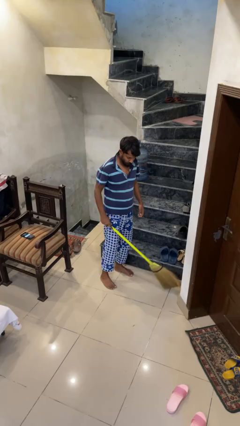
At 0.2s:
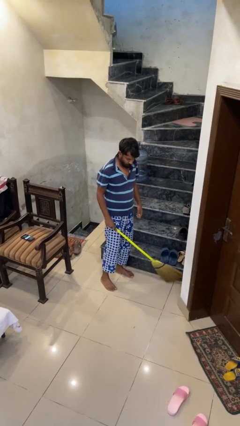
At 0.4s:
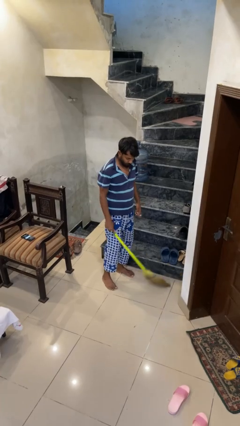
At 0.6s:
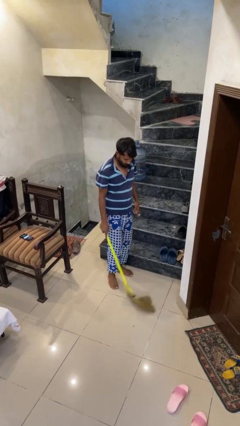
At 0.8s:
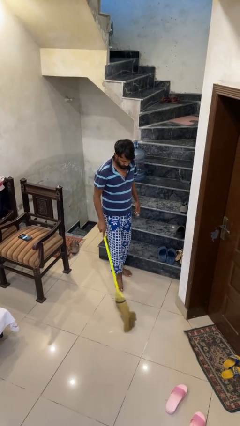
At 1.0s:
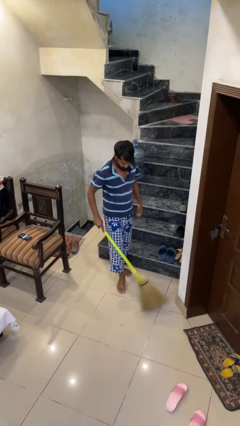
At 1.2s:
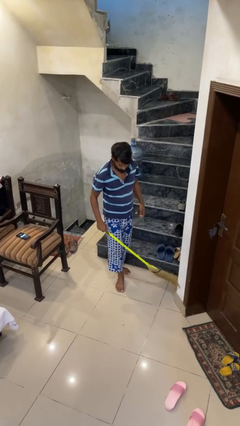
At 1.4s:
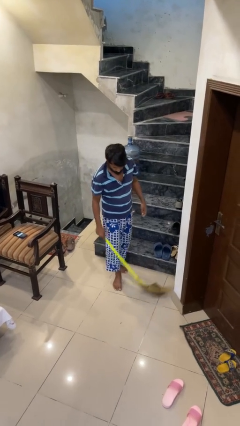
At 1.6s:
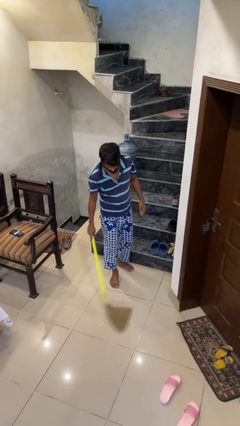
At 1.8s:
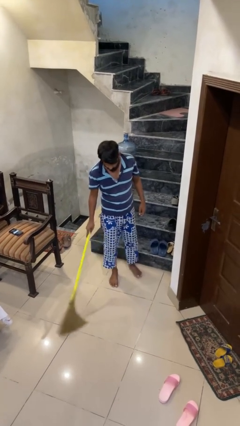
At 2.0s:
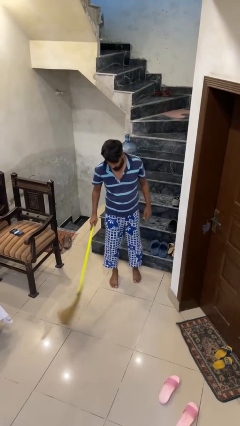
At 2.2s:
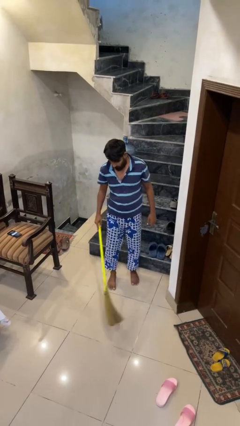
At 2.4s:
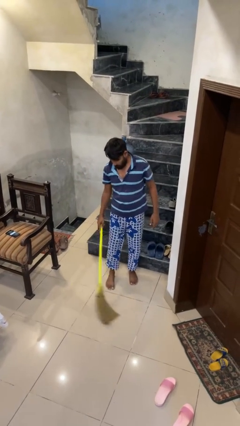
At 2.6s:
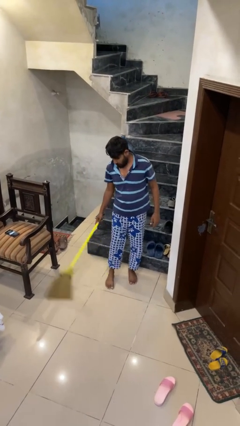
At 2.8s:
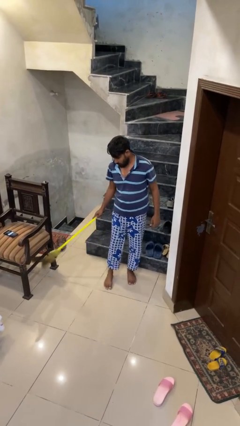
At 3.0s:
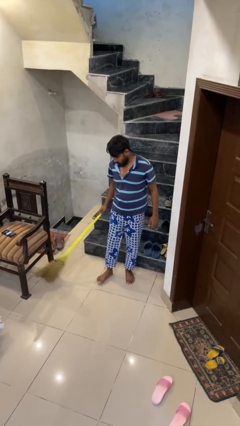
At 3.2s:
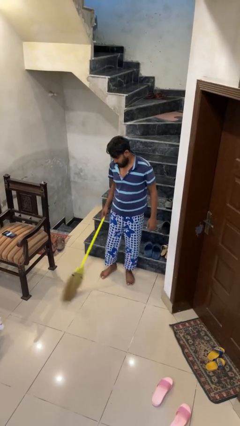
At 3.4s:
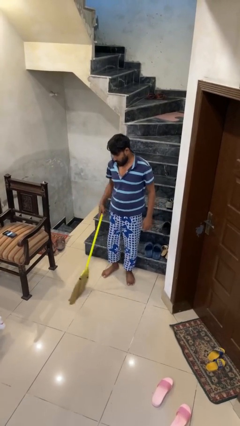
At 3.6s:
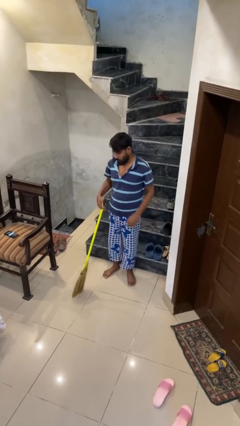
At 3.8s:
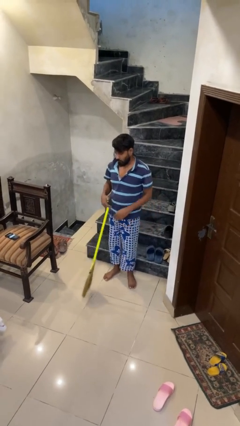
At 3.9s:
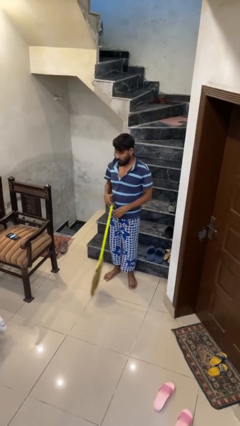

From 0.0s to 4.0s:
person sweeps floor

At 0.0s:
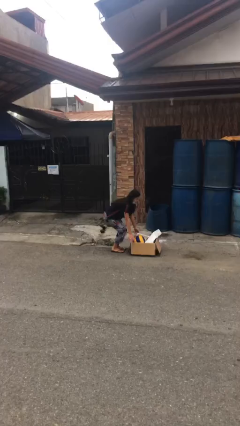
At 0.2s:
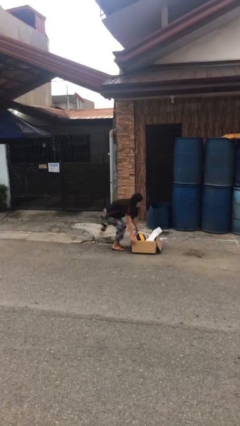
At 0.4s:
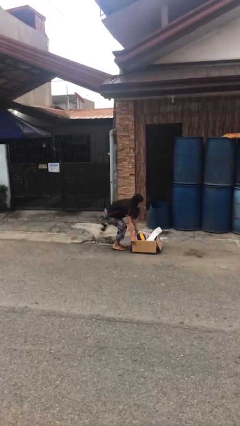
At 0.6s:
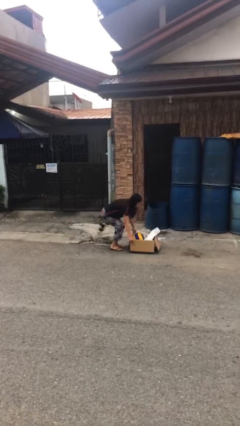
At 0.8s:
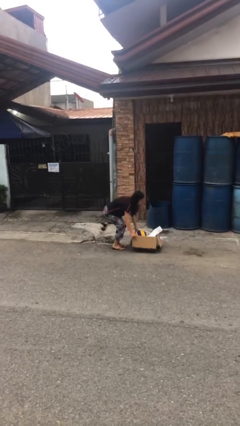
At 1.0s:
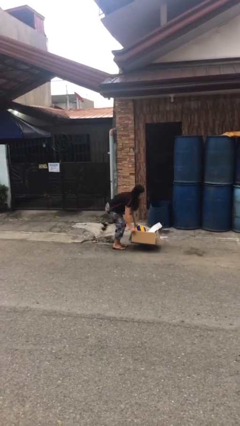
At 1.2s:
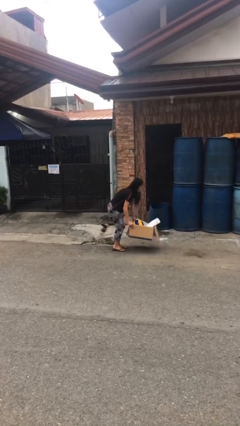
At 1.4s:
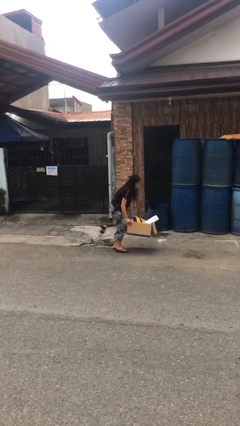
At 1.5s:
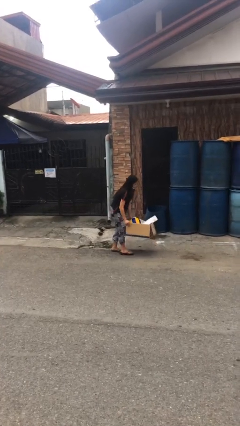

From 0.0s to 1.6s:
person picks up object from floor

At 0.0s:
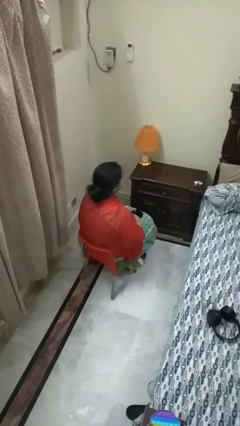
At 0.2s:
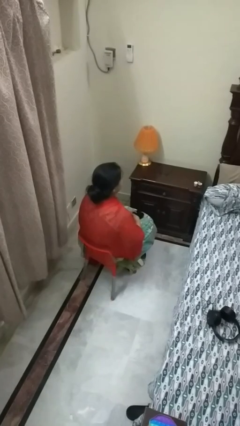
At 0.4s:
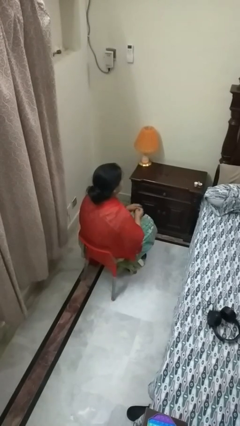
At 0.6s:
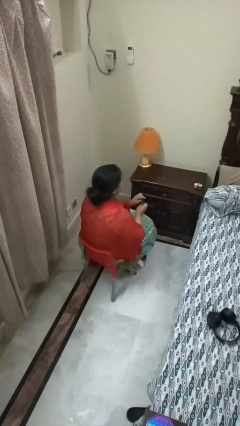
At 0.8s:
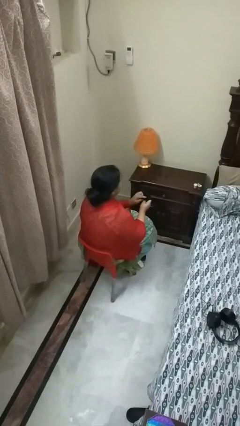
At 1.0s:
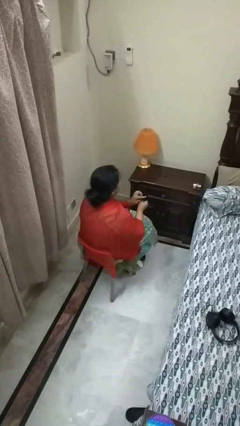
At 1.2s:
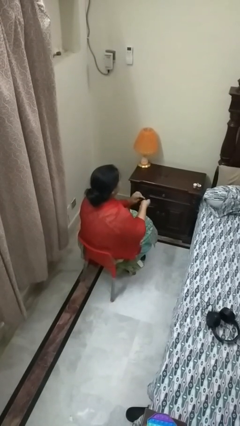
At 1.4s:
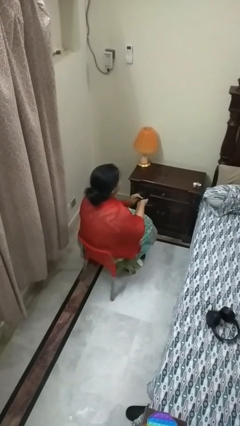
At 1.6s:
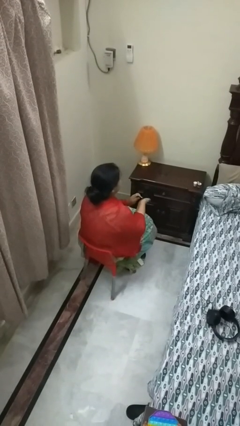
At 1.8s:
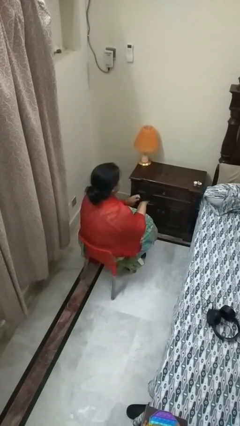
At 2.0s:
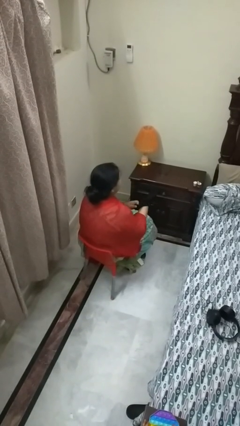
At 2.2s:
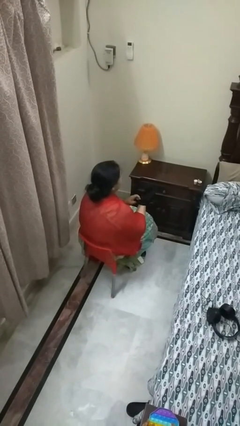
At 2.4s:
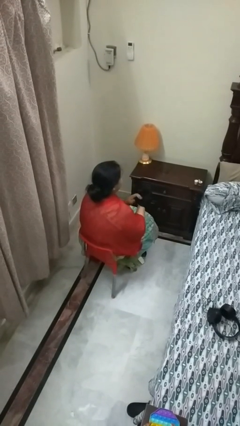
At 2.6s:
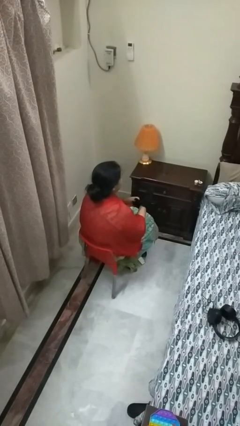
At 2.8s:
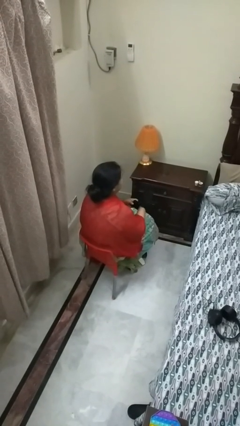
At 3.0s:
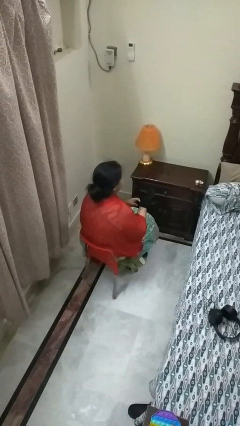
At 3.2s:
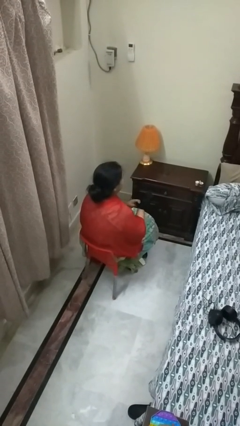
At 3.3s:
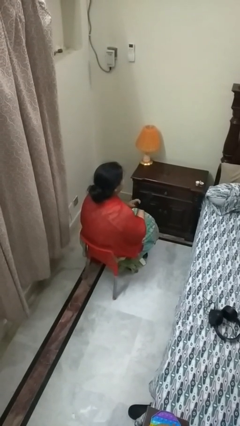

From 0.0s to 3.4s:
person puts on gloves

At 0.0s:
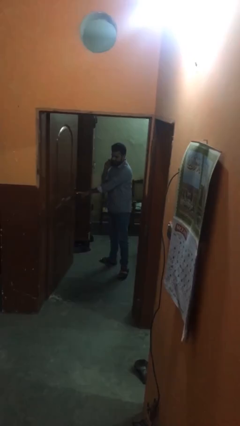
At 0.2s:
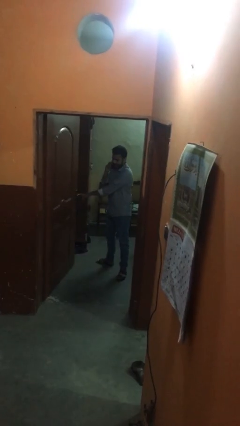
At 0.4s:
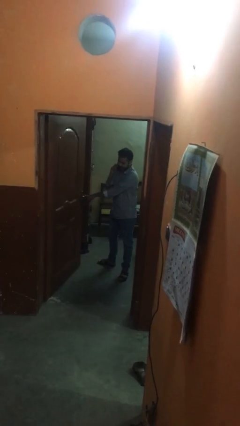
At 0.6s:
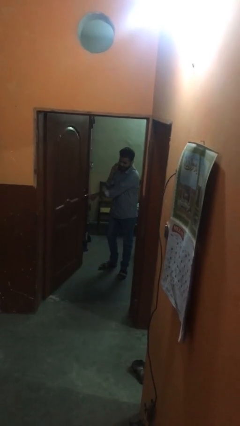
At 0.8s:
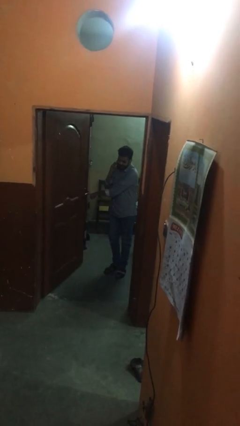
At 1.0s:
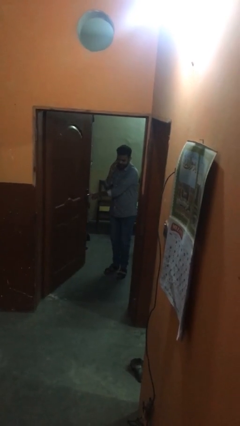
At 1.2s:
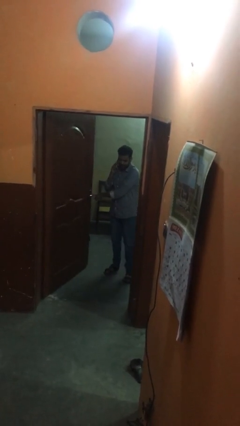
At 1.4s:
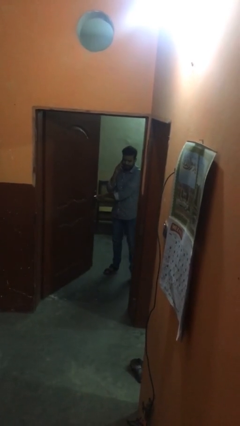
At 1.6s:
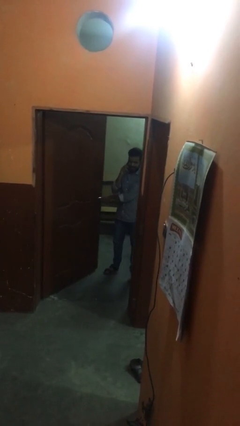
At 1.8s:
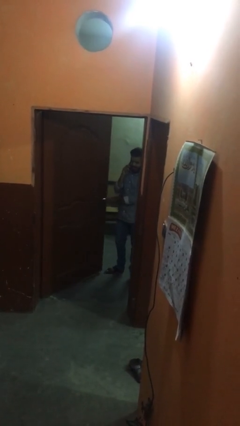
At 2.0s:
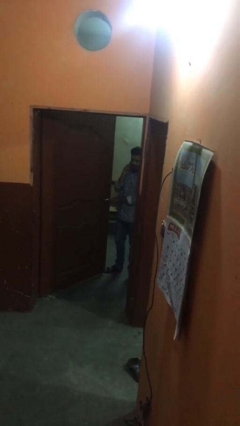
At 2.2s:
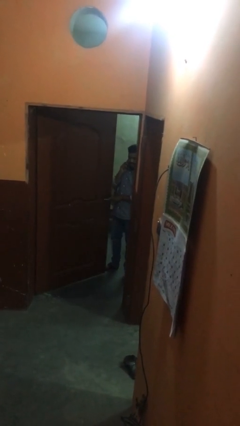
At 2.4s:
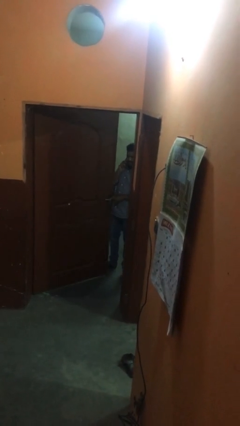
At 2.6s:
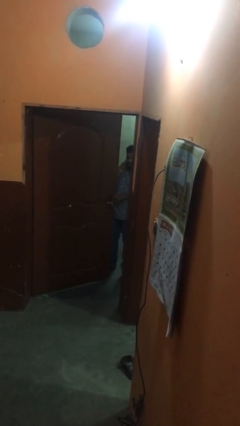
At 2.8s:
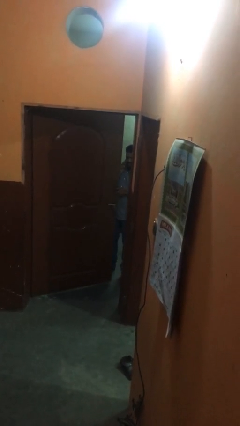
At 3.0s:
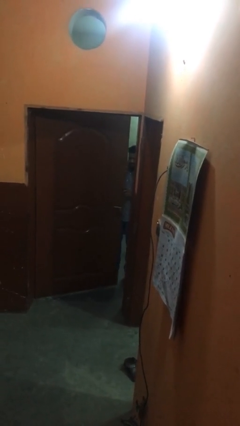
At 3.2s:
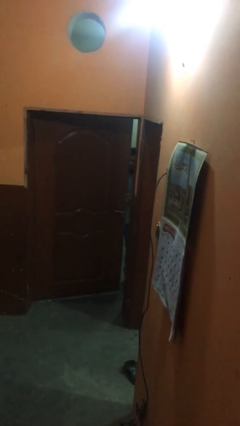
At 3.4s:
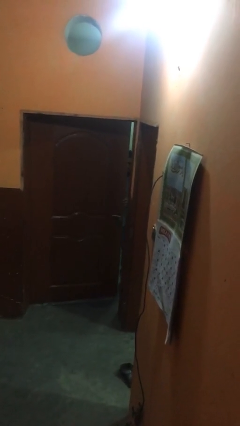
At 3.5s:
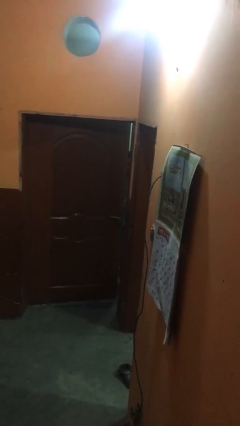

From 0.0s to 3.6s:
person closes facility door

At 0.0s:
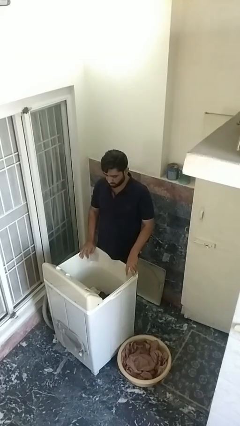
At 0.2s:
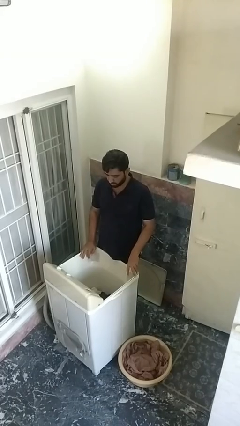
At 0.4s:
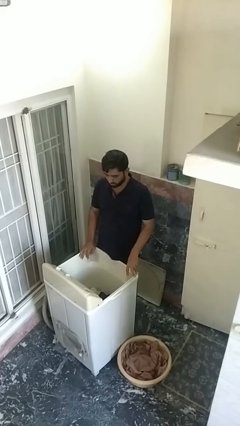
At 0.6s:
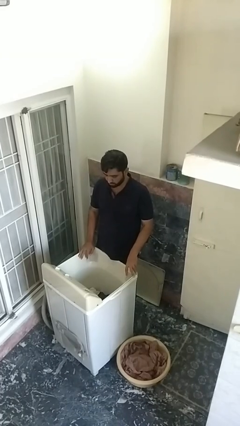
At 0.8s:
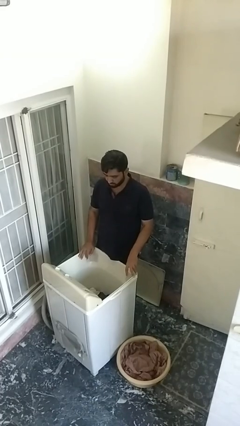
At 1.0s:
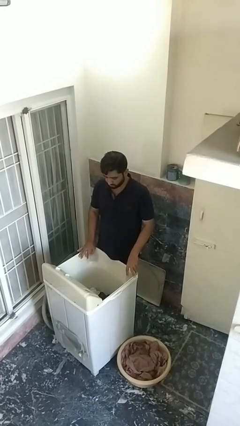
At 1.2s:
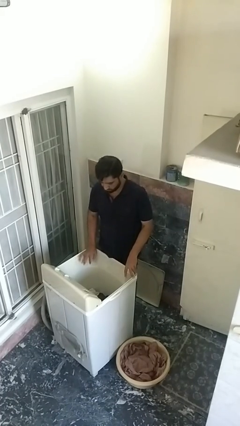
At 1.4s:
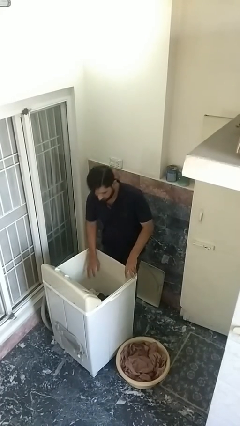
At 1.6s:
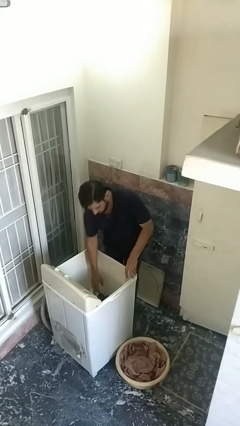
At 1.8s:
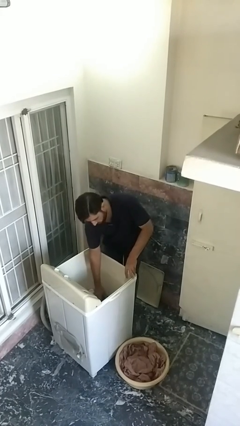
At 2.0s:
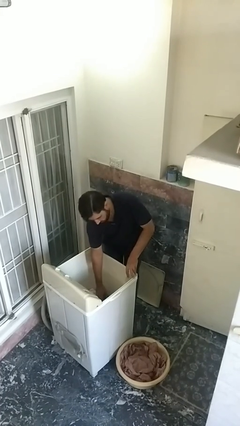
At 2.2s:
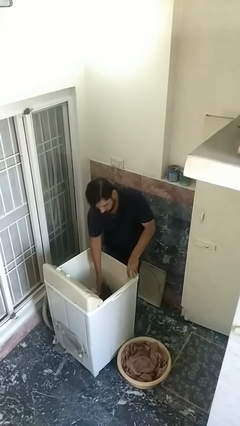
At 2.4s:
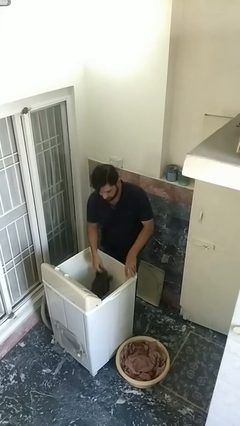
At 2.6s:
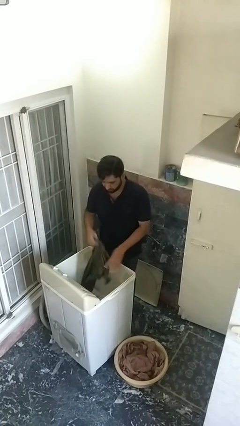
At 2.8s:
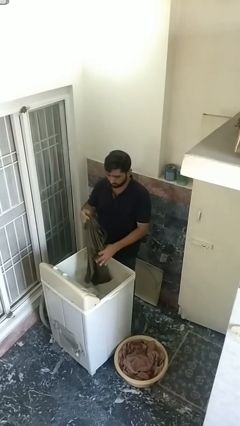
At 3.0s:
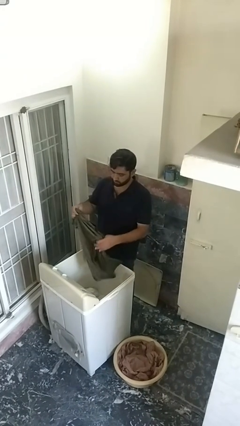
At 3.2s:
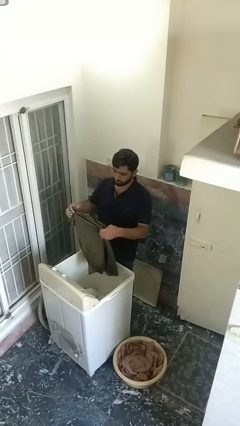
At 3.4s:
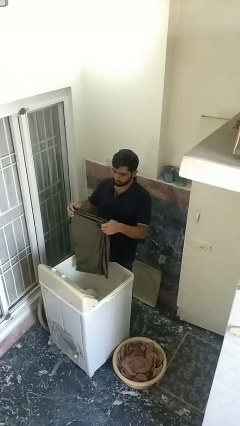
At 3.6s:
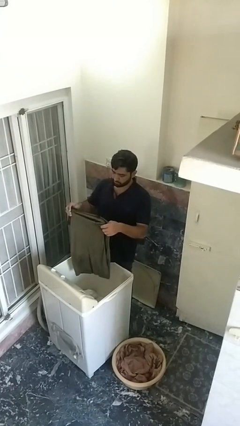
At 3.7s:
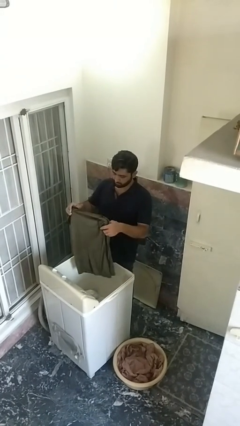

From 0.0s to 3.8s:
person unloads clotheswasher

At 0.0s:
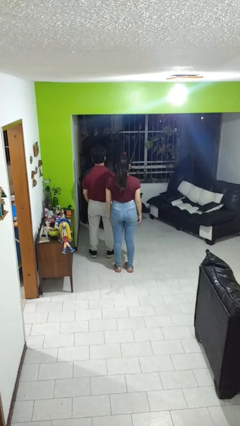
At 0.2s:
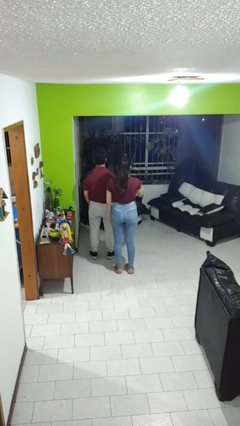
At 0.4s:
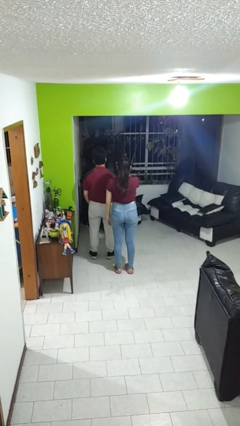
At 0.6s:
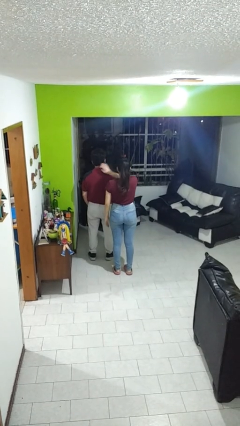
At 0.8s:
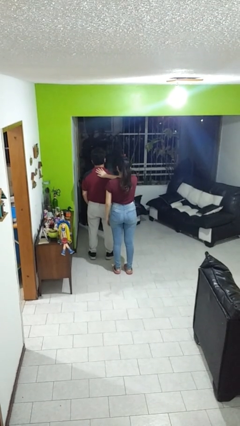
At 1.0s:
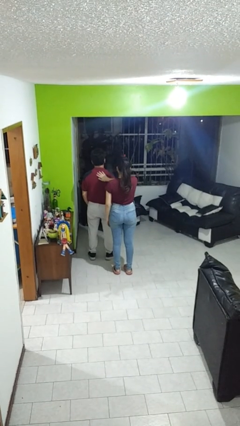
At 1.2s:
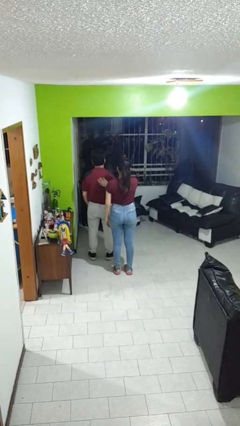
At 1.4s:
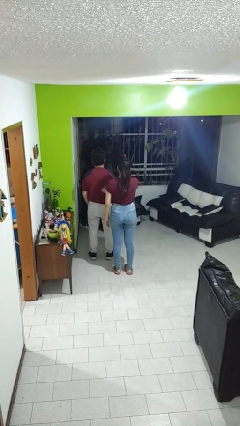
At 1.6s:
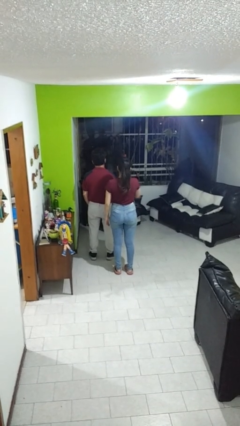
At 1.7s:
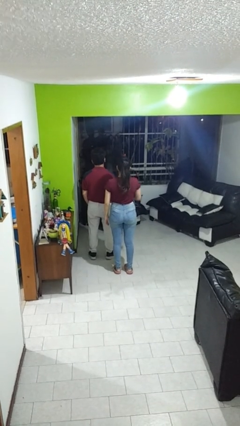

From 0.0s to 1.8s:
person touches back of person
